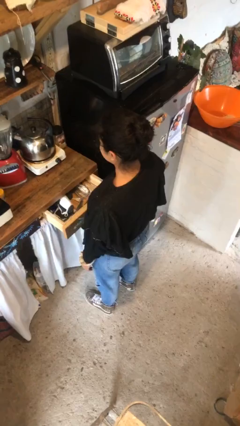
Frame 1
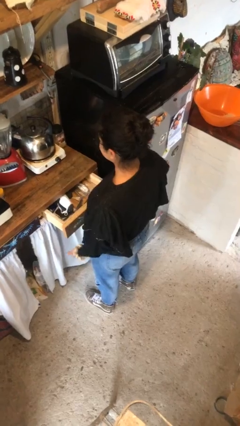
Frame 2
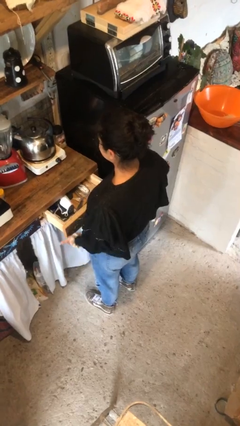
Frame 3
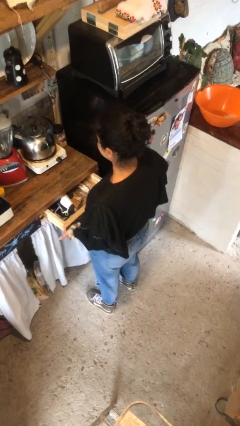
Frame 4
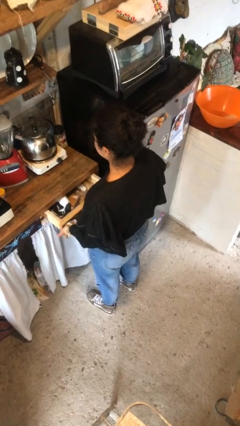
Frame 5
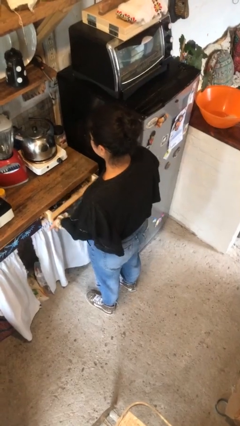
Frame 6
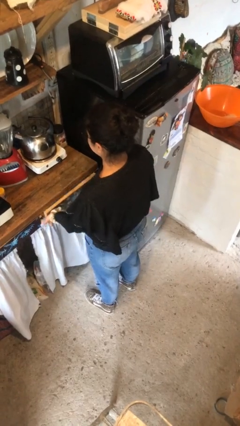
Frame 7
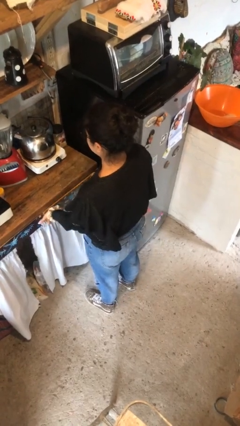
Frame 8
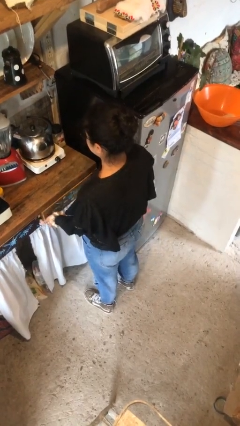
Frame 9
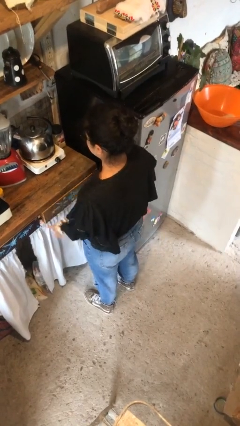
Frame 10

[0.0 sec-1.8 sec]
person closes kitchen drawer

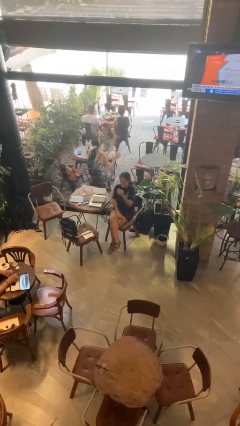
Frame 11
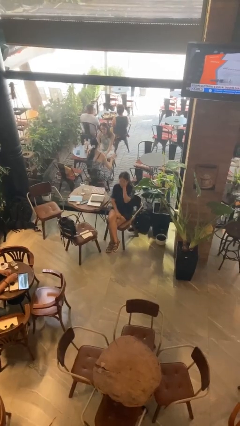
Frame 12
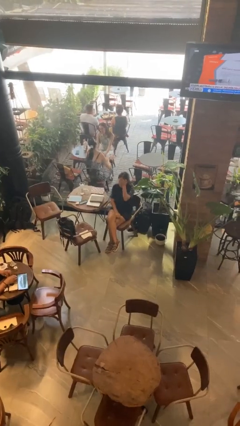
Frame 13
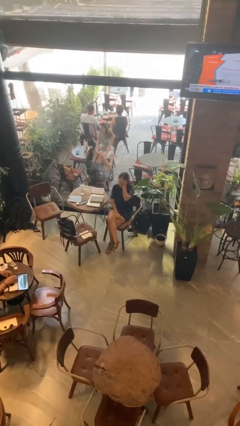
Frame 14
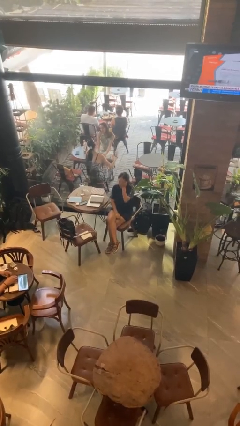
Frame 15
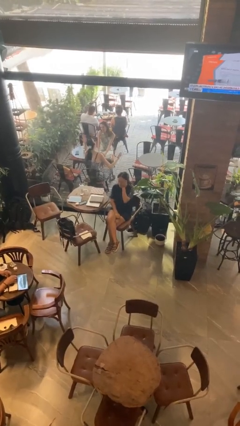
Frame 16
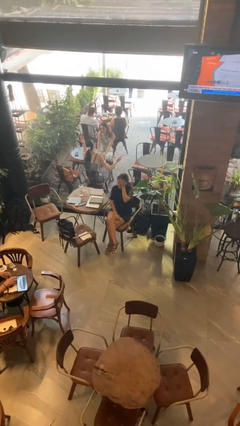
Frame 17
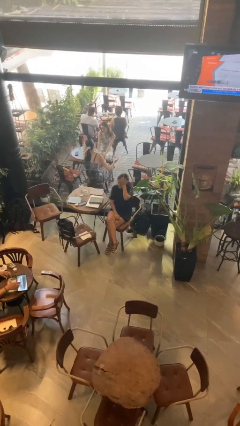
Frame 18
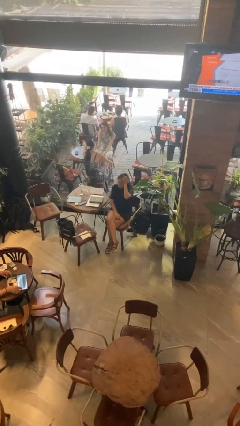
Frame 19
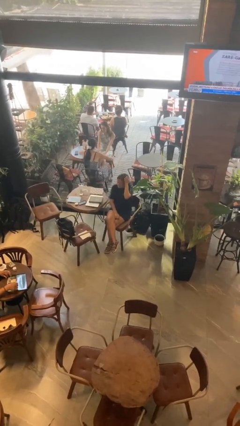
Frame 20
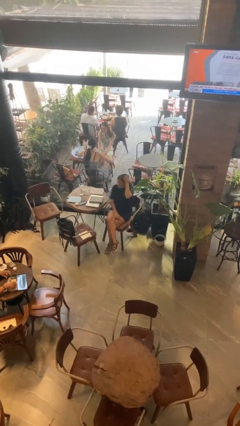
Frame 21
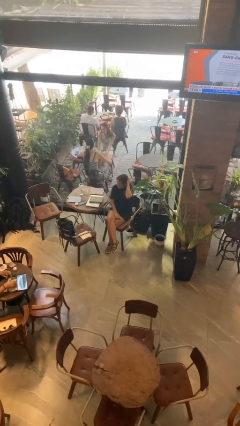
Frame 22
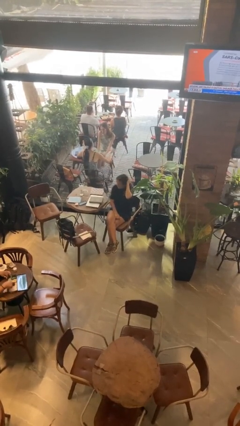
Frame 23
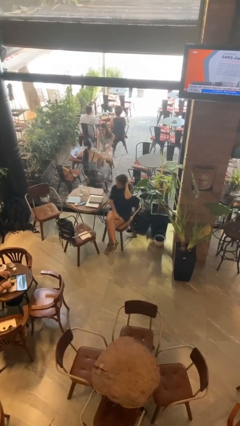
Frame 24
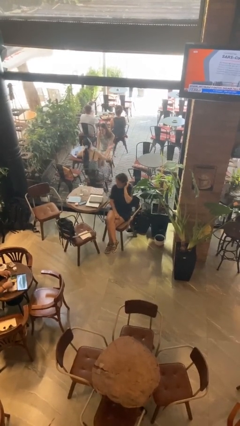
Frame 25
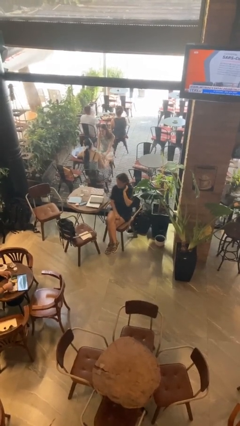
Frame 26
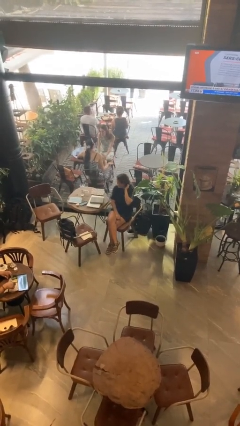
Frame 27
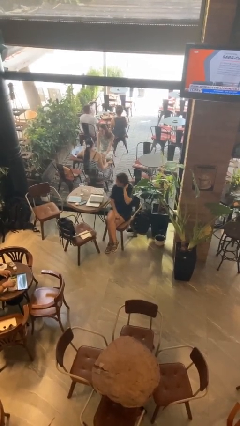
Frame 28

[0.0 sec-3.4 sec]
person scratches face

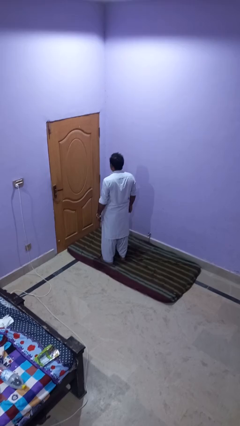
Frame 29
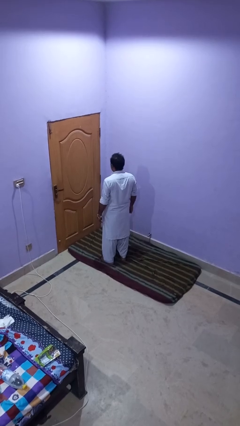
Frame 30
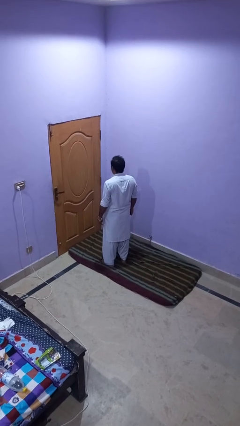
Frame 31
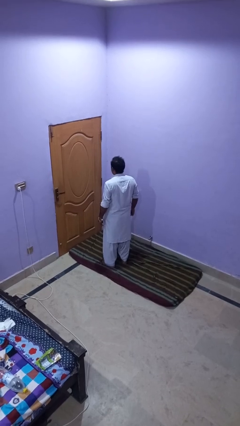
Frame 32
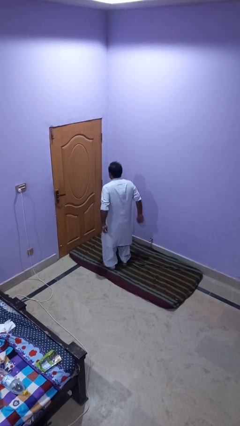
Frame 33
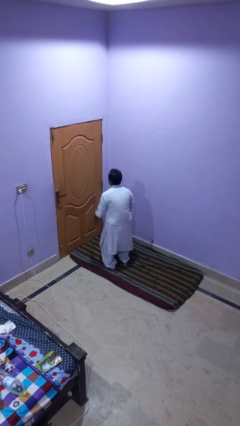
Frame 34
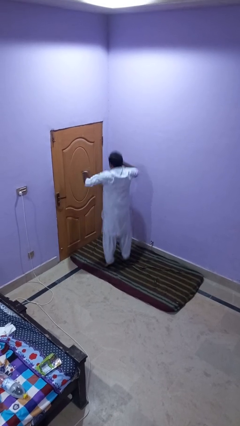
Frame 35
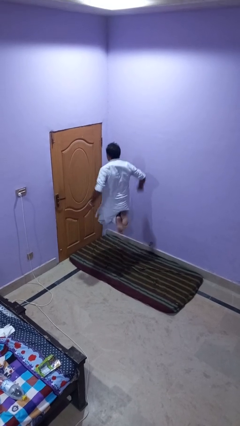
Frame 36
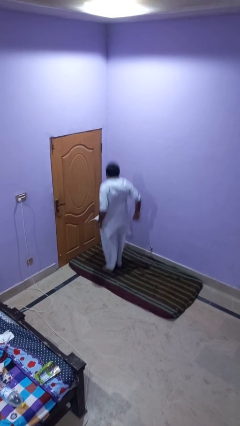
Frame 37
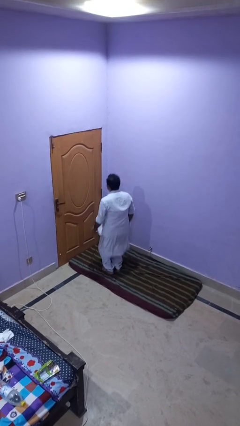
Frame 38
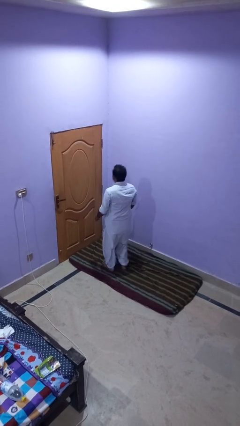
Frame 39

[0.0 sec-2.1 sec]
person jumps

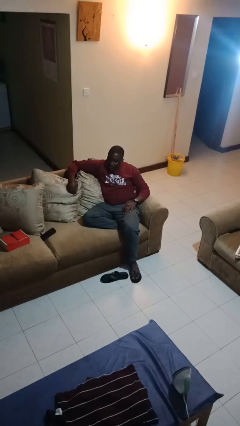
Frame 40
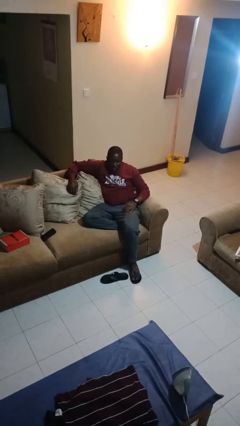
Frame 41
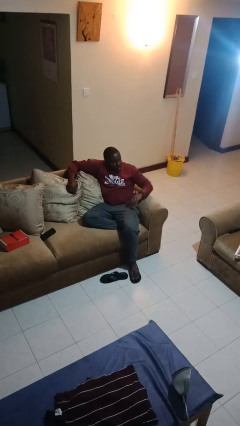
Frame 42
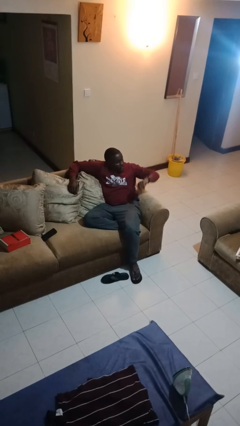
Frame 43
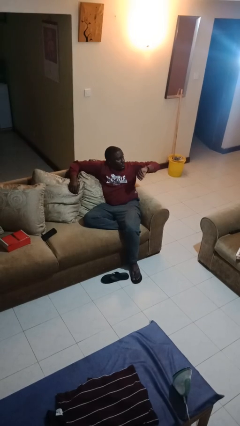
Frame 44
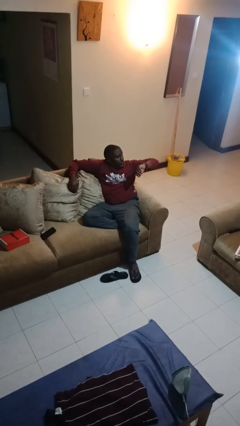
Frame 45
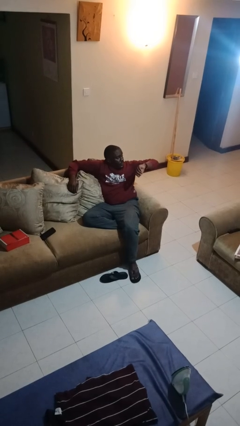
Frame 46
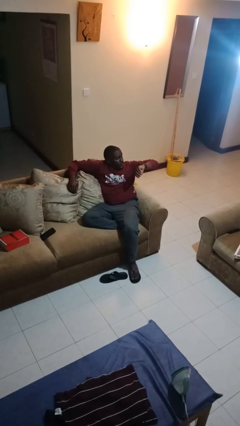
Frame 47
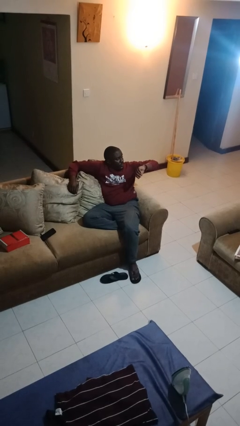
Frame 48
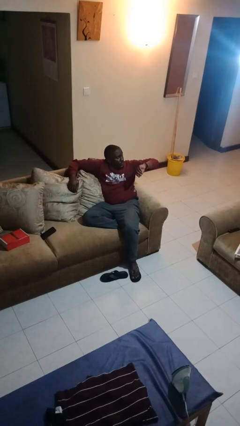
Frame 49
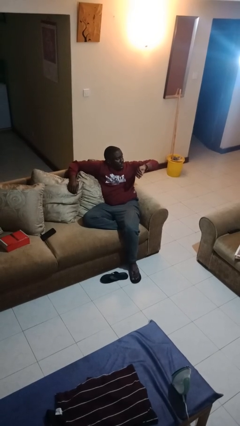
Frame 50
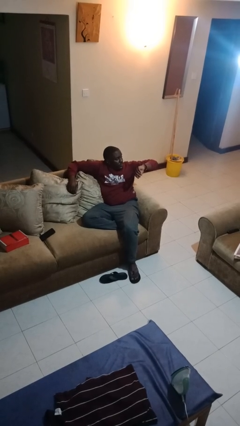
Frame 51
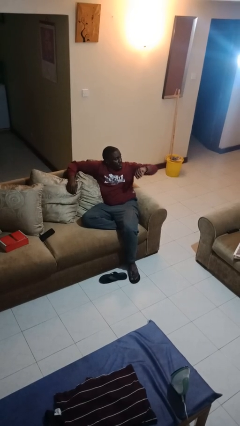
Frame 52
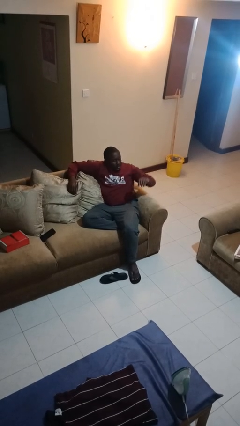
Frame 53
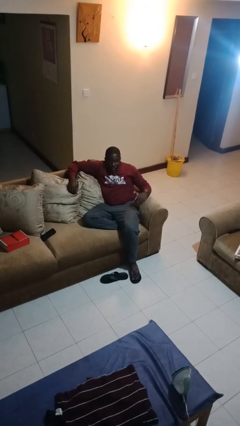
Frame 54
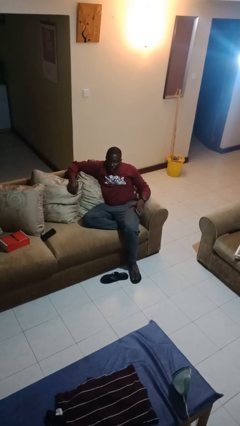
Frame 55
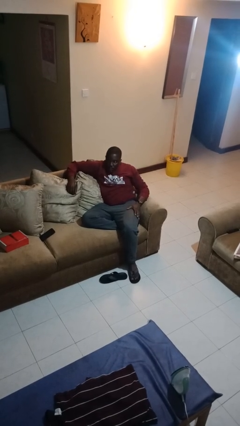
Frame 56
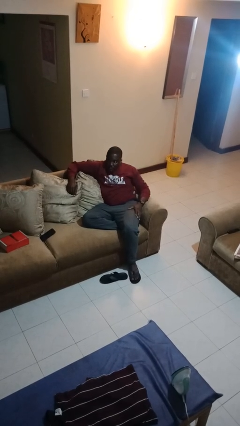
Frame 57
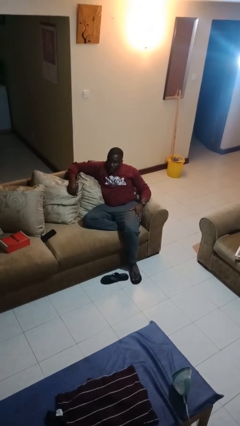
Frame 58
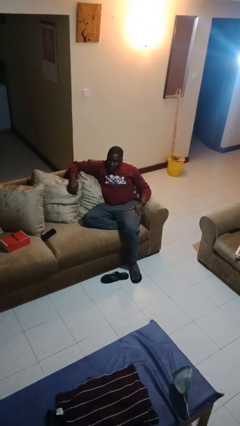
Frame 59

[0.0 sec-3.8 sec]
person looks at wristwatch

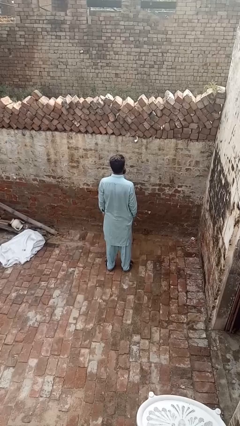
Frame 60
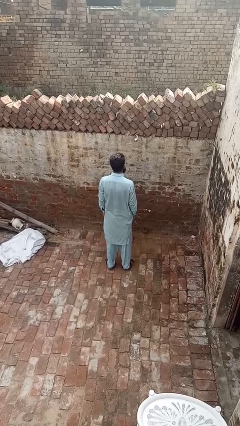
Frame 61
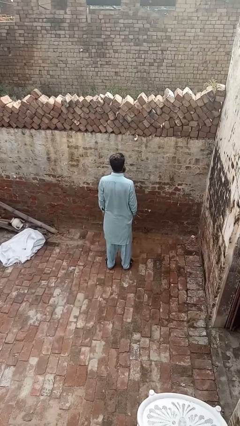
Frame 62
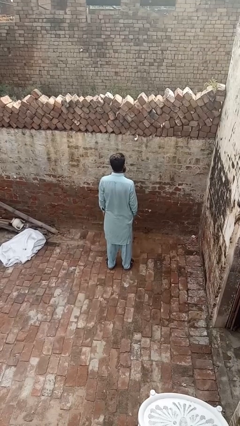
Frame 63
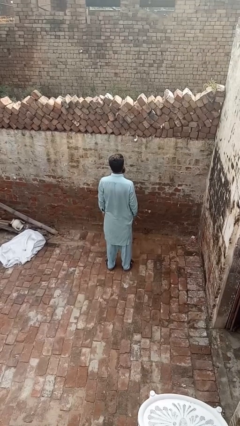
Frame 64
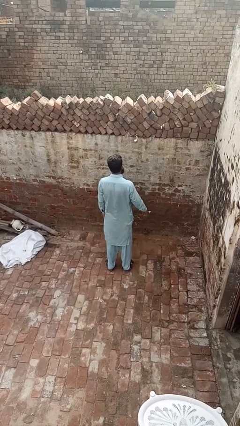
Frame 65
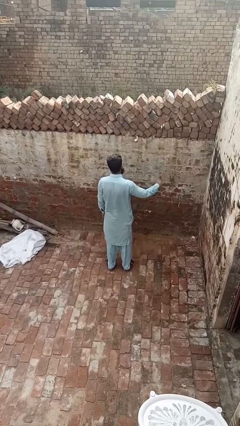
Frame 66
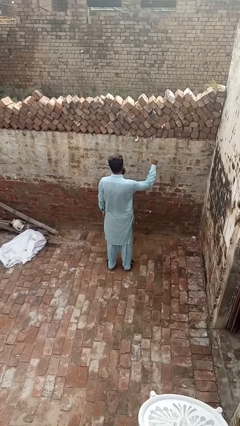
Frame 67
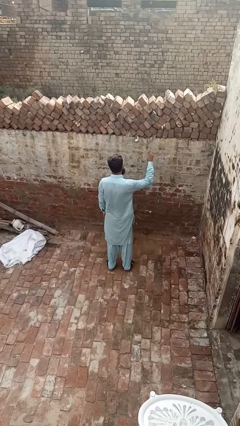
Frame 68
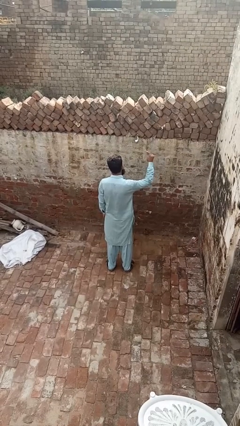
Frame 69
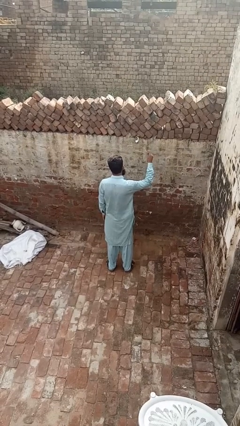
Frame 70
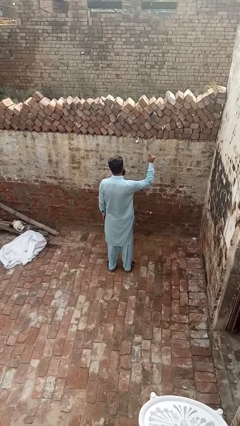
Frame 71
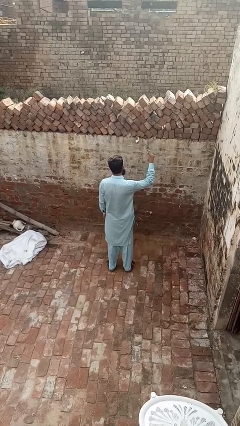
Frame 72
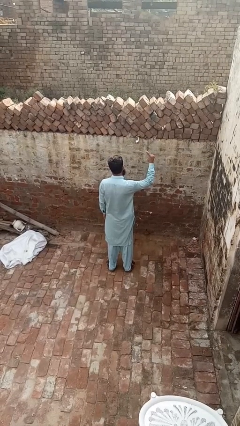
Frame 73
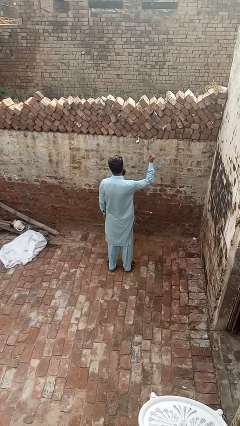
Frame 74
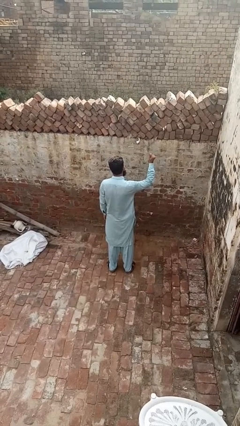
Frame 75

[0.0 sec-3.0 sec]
person snaps fingers

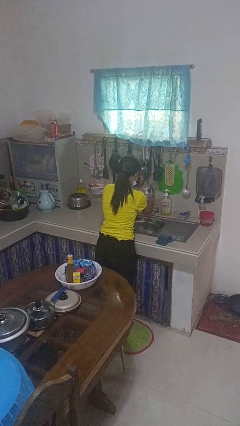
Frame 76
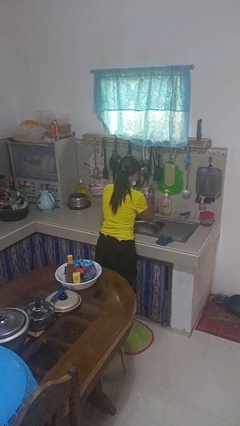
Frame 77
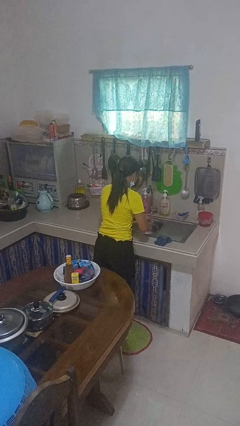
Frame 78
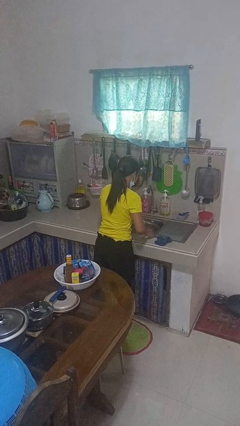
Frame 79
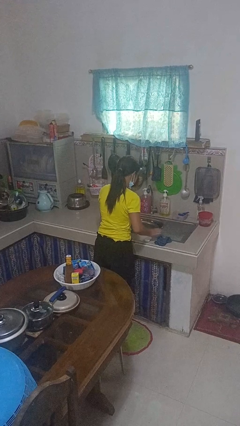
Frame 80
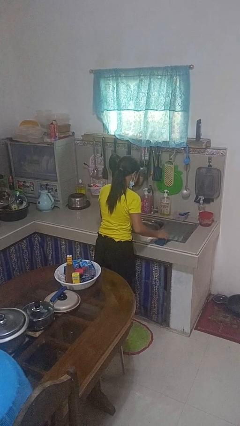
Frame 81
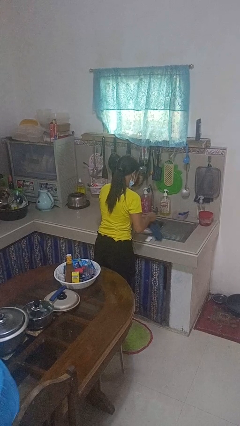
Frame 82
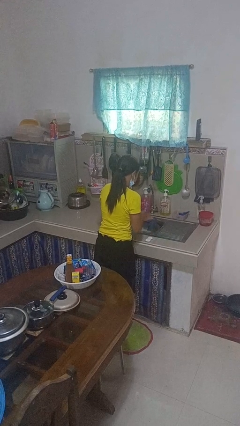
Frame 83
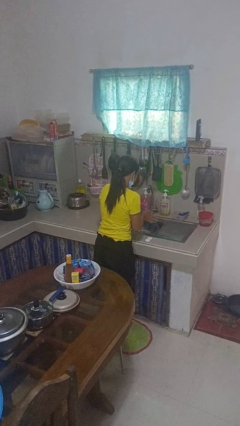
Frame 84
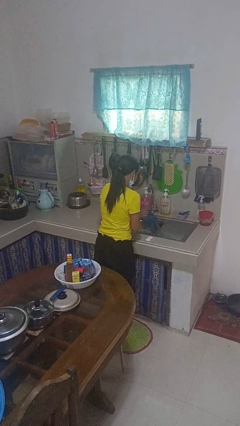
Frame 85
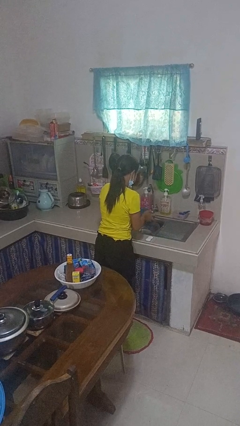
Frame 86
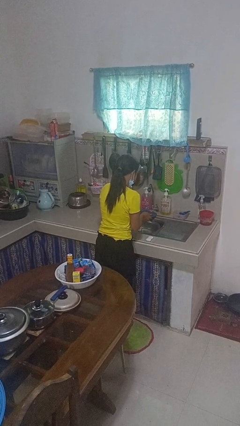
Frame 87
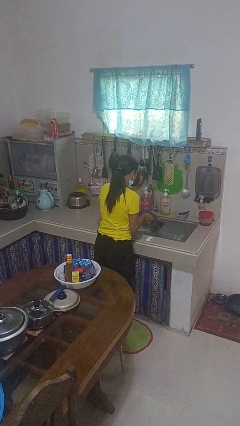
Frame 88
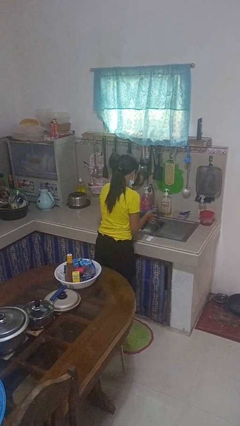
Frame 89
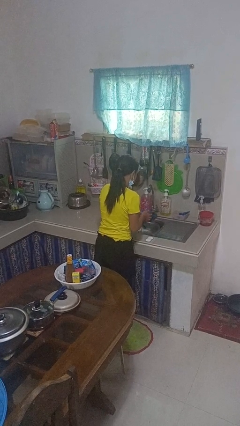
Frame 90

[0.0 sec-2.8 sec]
person dries hands with towel

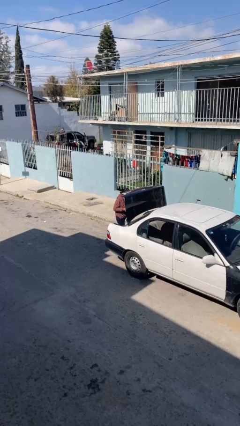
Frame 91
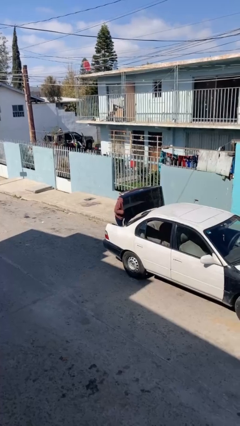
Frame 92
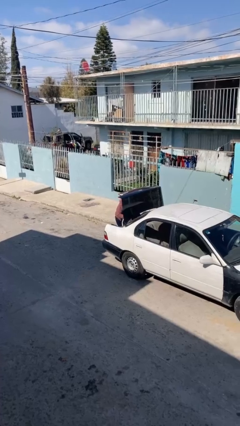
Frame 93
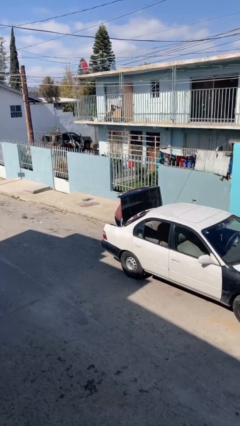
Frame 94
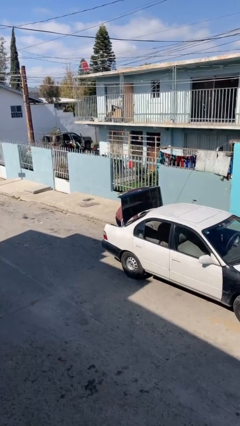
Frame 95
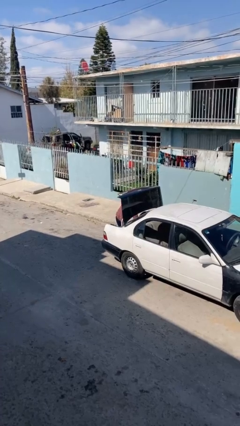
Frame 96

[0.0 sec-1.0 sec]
person loads car
